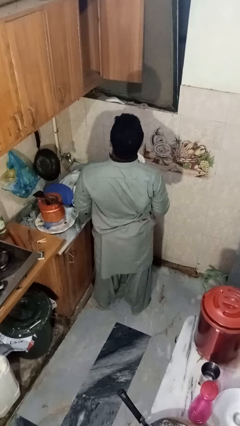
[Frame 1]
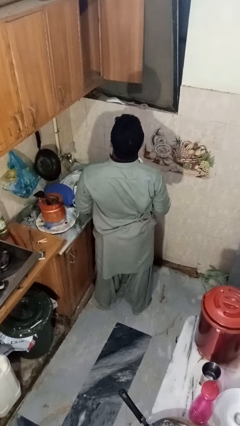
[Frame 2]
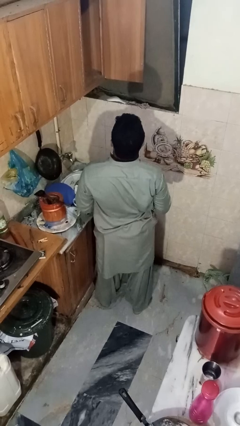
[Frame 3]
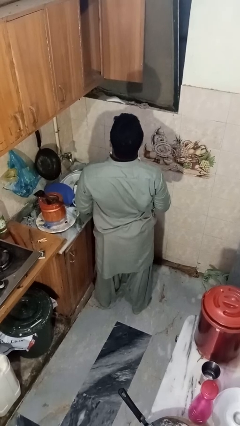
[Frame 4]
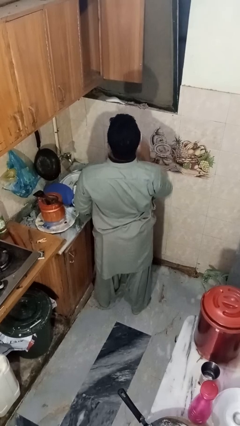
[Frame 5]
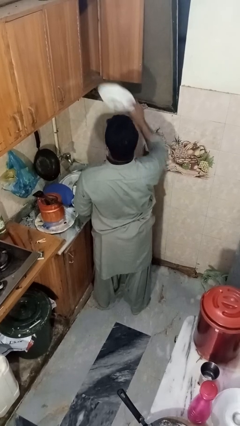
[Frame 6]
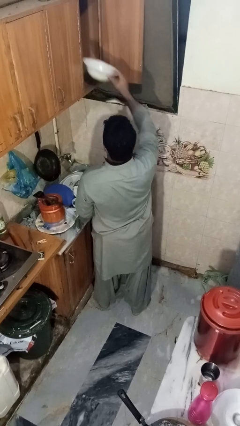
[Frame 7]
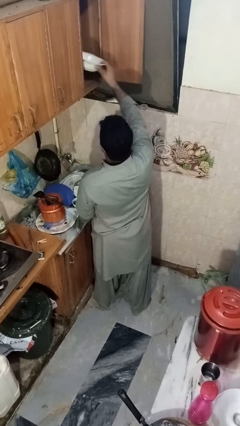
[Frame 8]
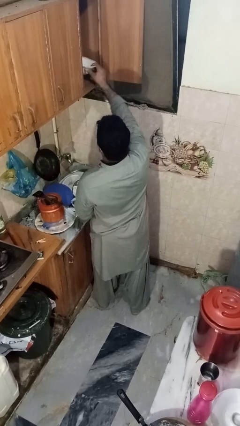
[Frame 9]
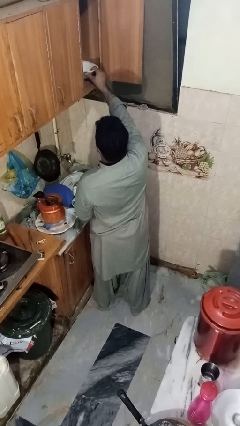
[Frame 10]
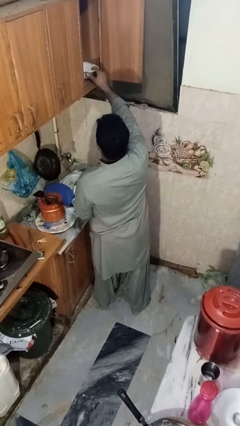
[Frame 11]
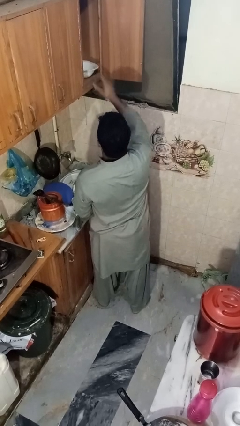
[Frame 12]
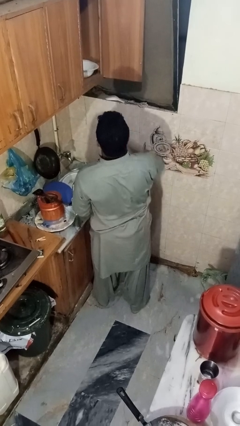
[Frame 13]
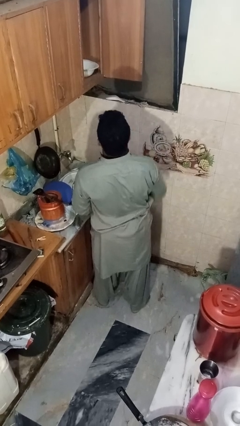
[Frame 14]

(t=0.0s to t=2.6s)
person puts object in cabinet

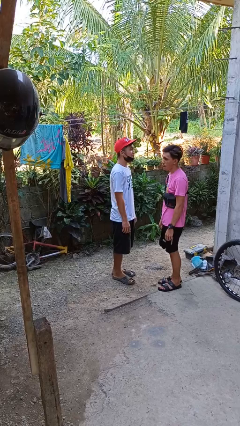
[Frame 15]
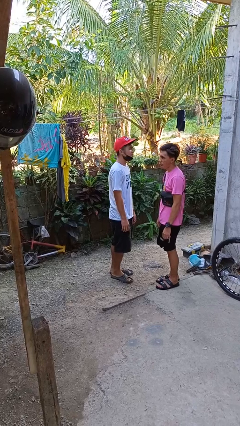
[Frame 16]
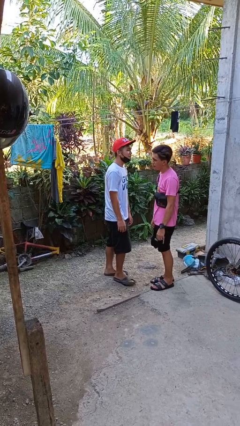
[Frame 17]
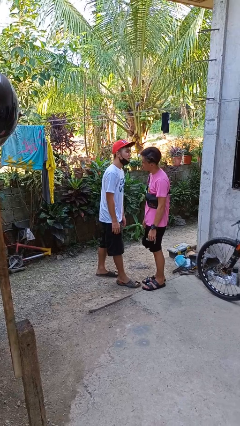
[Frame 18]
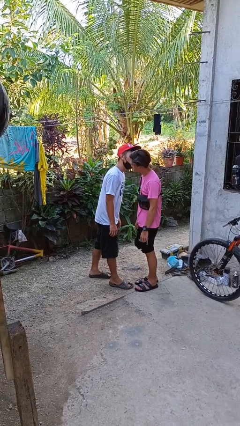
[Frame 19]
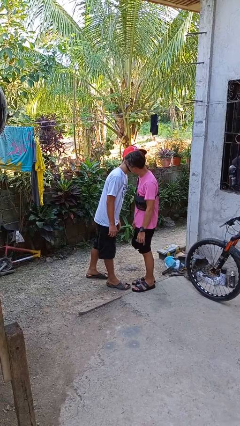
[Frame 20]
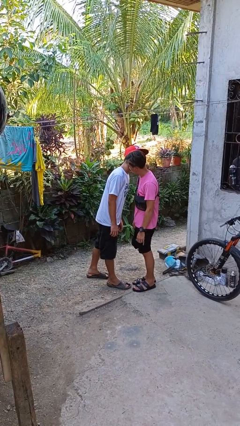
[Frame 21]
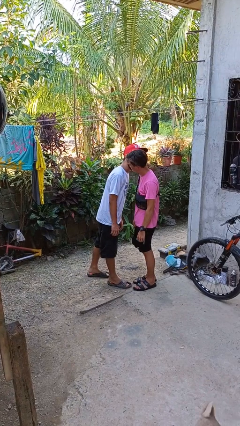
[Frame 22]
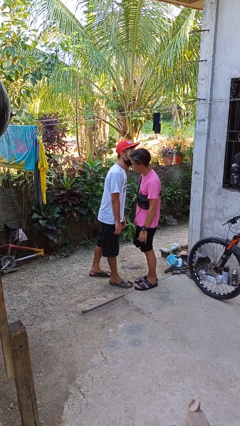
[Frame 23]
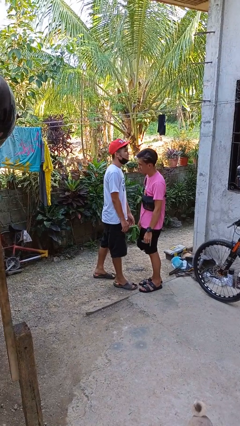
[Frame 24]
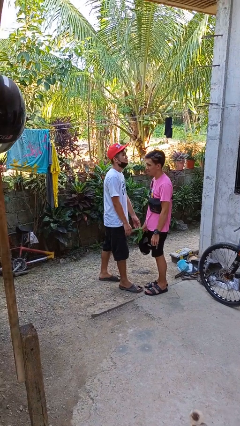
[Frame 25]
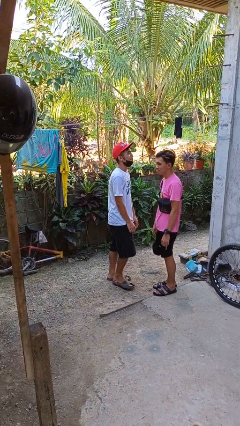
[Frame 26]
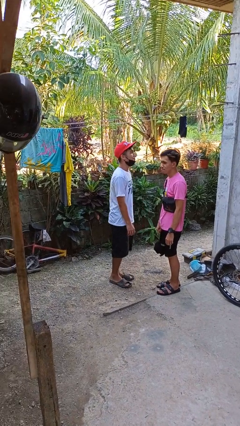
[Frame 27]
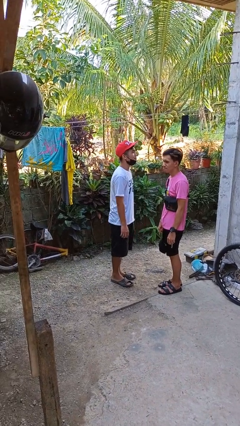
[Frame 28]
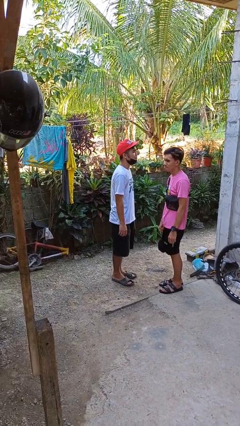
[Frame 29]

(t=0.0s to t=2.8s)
person kisses cheek of person

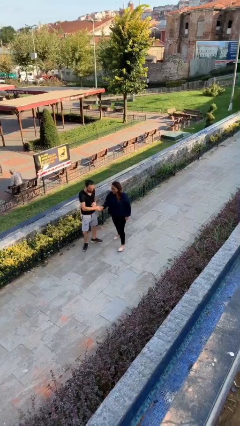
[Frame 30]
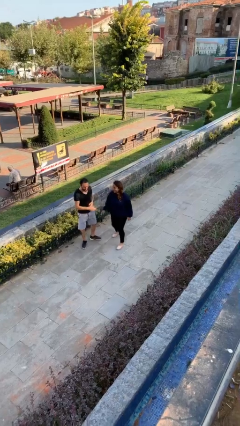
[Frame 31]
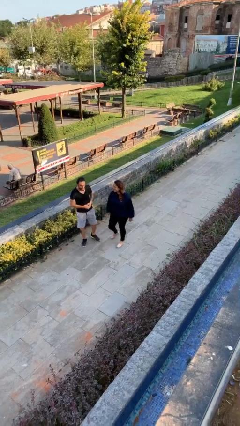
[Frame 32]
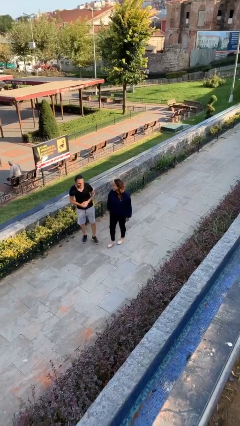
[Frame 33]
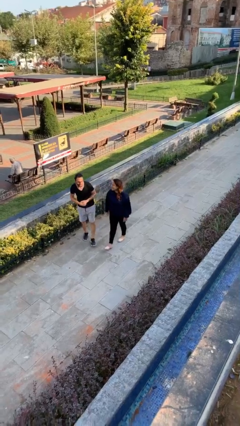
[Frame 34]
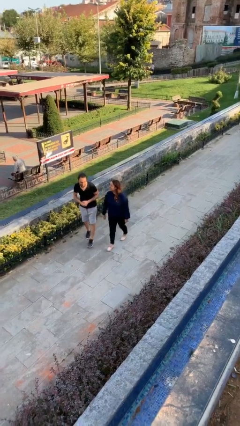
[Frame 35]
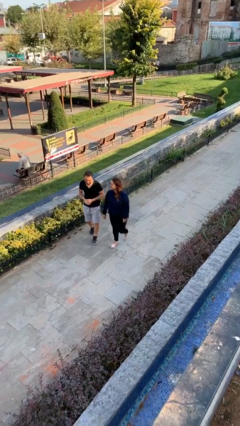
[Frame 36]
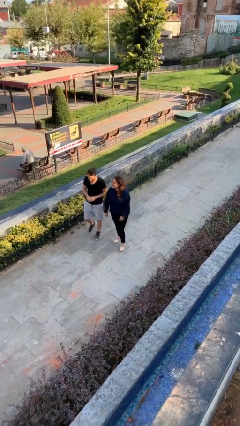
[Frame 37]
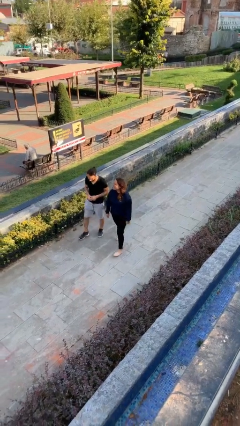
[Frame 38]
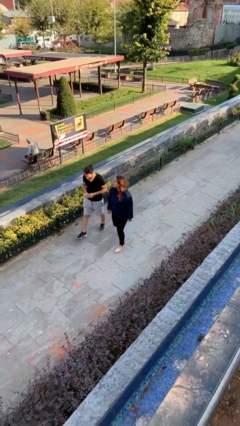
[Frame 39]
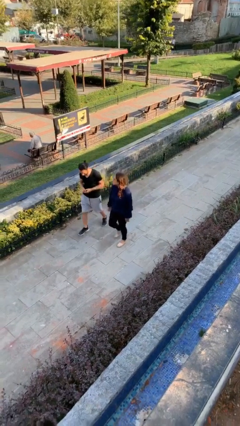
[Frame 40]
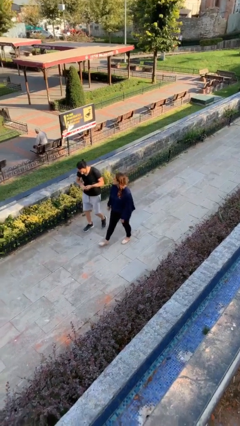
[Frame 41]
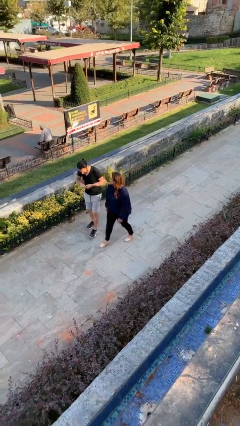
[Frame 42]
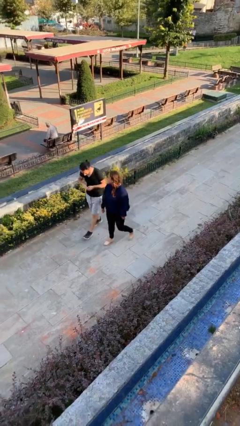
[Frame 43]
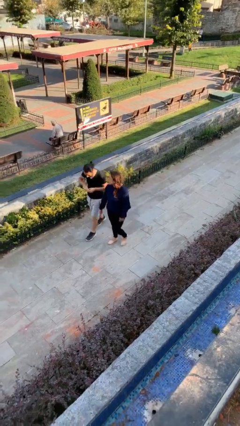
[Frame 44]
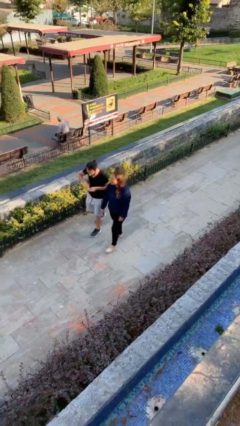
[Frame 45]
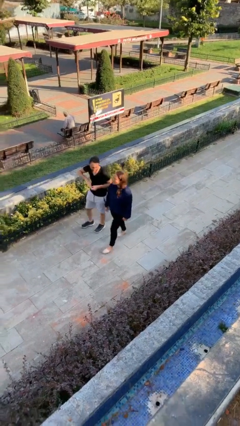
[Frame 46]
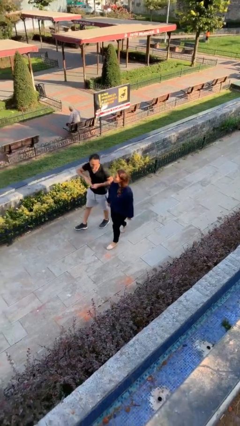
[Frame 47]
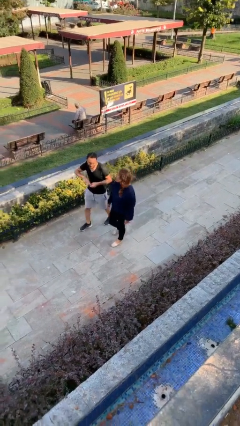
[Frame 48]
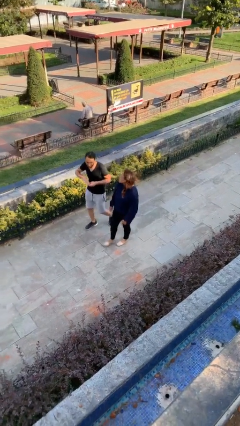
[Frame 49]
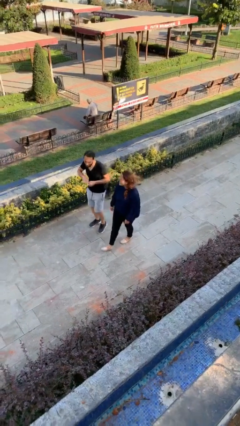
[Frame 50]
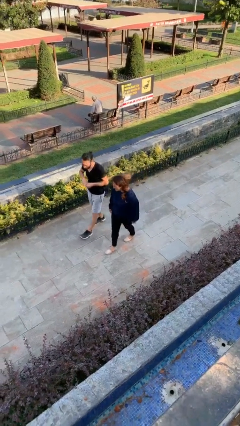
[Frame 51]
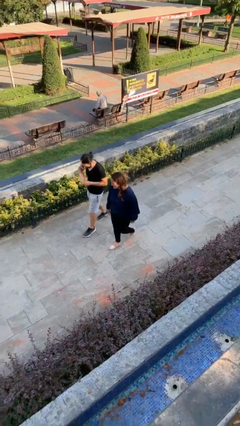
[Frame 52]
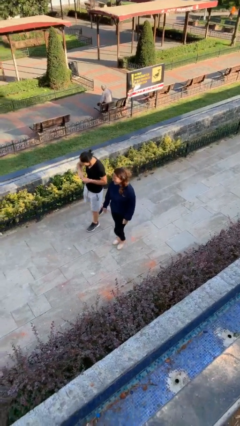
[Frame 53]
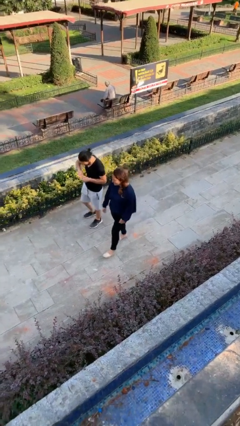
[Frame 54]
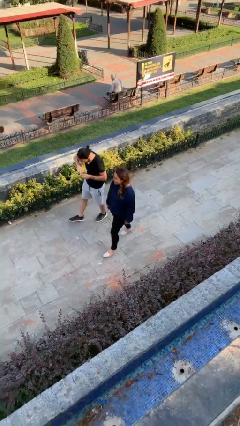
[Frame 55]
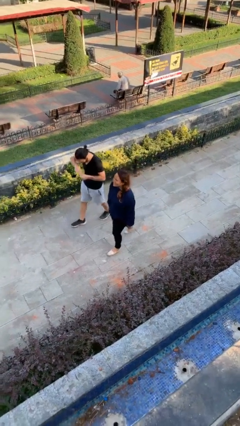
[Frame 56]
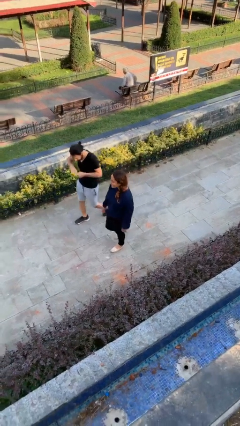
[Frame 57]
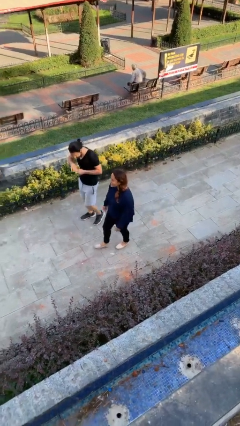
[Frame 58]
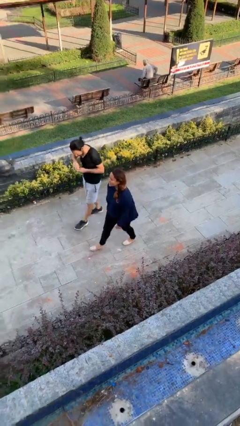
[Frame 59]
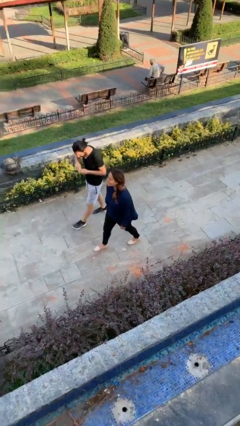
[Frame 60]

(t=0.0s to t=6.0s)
person talks to person

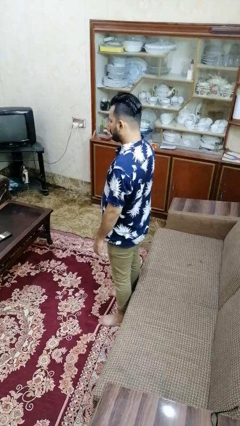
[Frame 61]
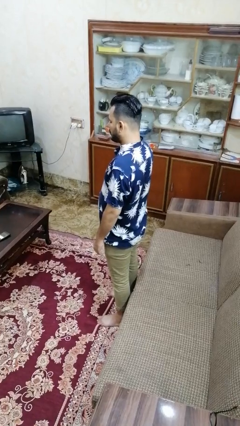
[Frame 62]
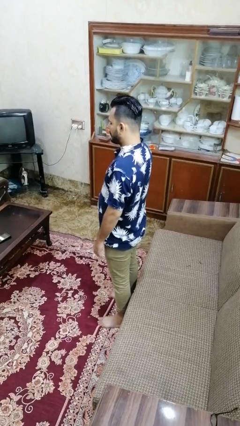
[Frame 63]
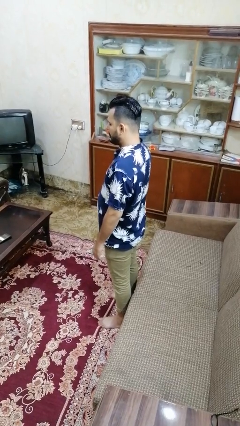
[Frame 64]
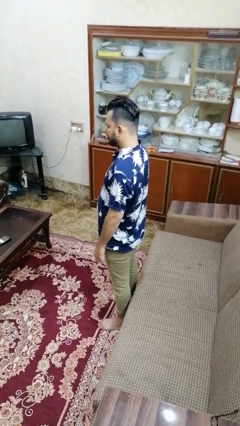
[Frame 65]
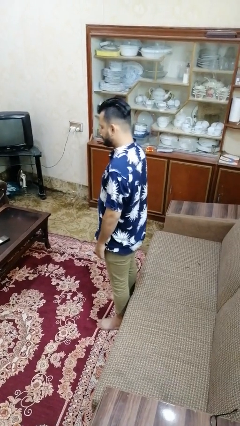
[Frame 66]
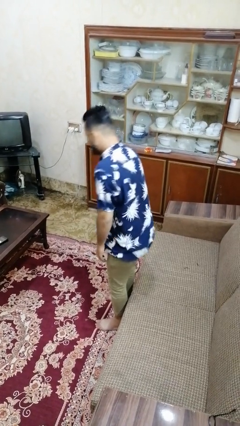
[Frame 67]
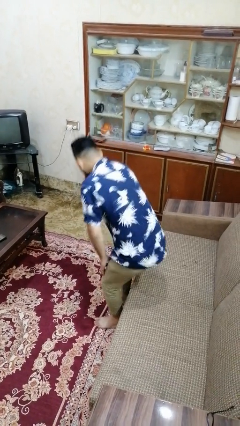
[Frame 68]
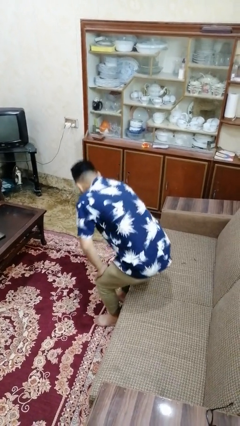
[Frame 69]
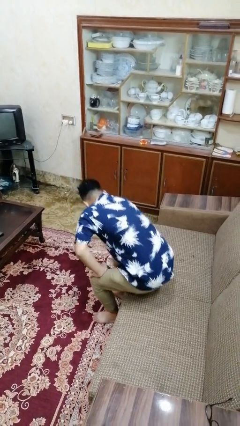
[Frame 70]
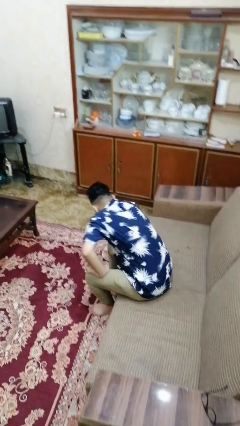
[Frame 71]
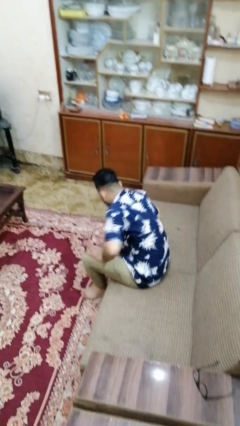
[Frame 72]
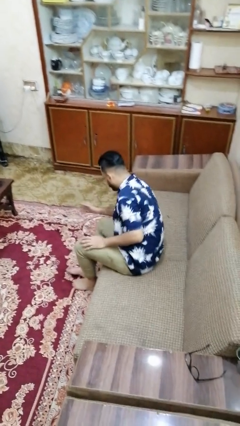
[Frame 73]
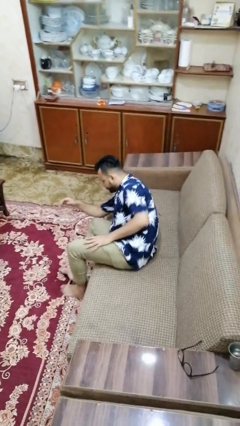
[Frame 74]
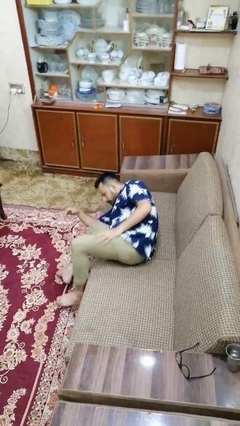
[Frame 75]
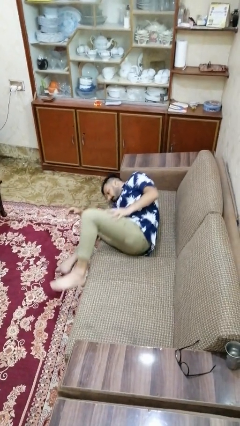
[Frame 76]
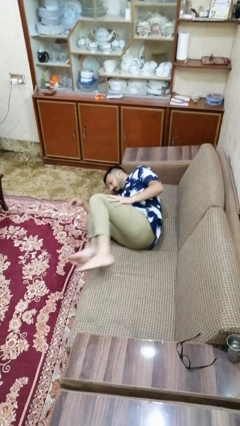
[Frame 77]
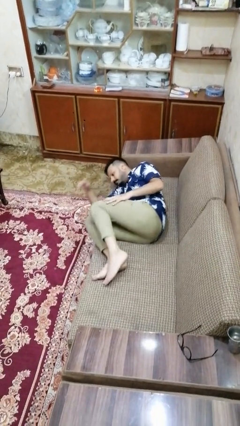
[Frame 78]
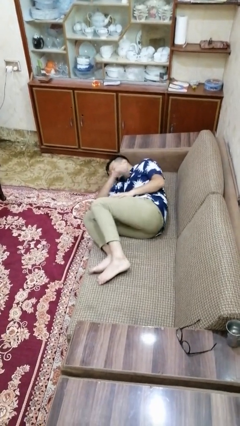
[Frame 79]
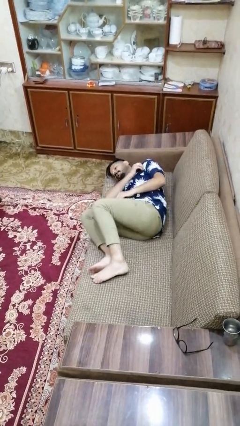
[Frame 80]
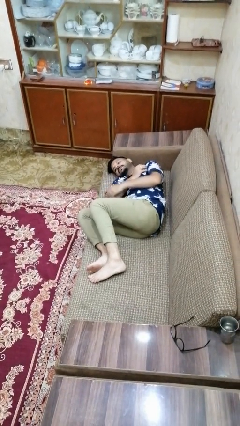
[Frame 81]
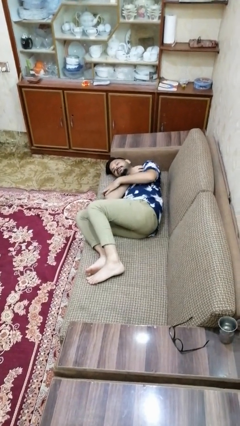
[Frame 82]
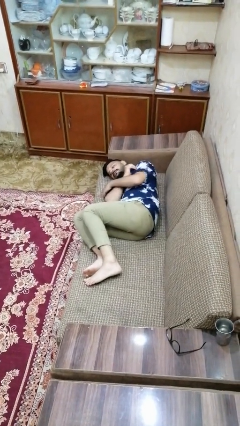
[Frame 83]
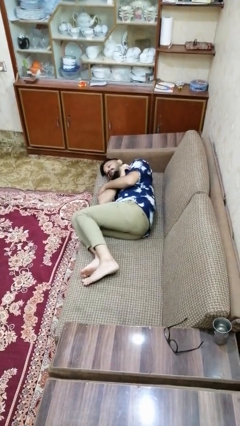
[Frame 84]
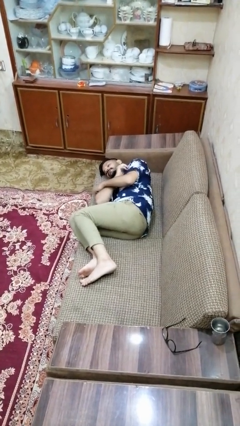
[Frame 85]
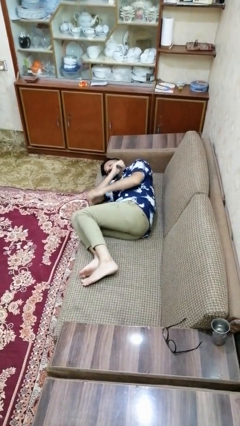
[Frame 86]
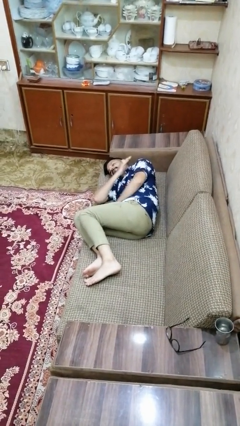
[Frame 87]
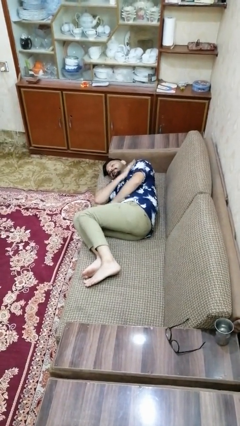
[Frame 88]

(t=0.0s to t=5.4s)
person lies down on couch

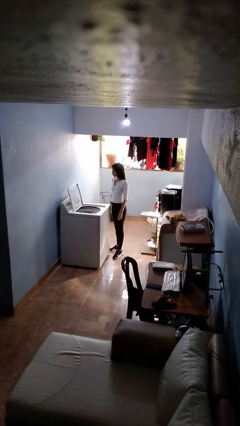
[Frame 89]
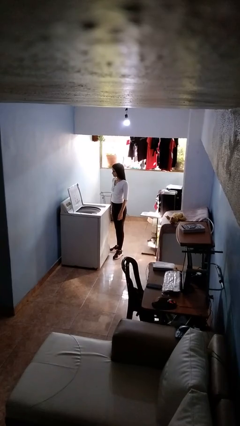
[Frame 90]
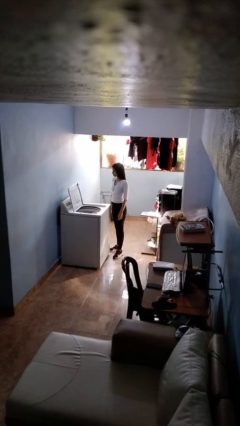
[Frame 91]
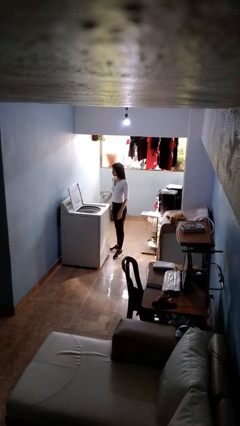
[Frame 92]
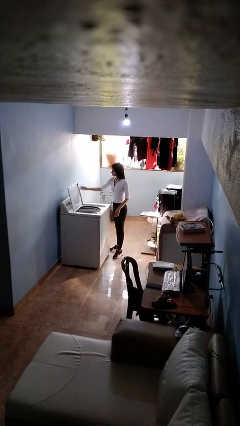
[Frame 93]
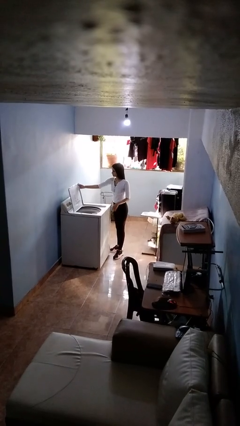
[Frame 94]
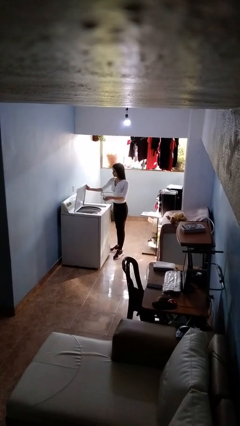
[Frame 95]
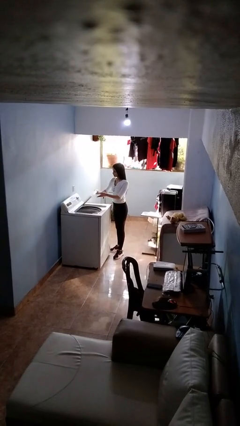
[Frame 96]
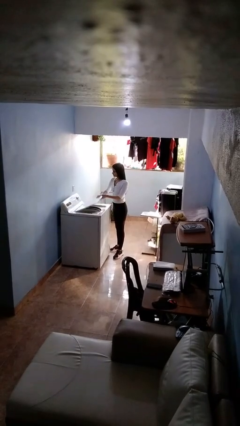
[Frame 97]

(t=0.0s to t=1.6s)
person closes clothes washer
